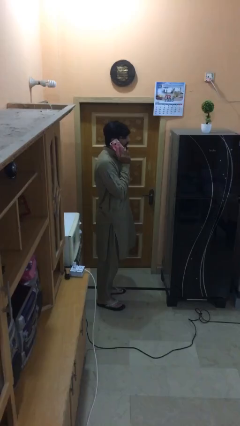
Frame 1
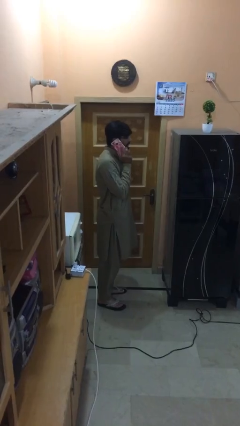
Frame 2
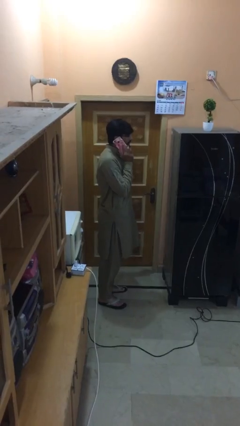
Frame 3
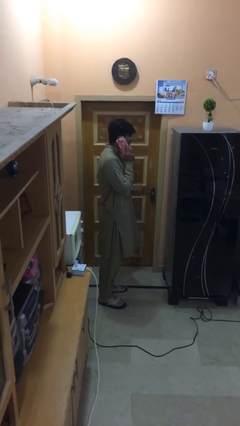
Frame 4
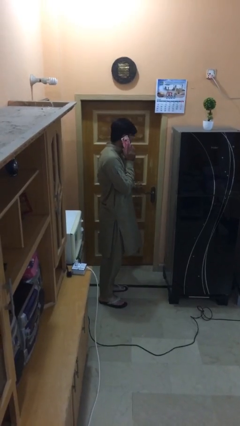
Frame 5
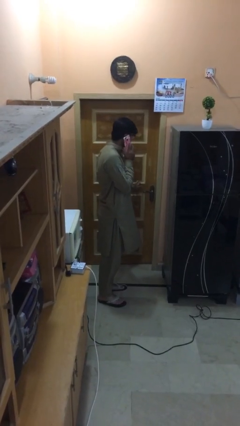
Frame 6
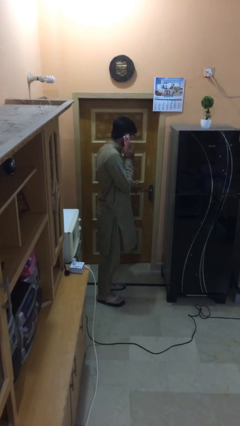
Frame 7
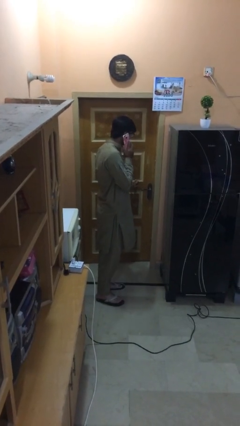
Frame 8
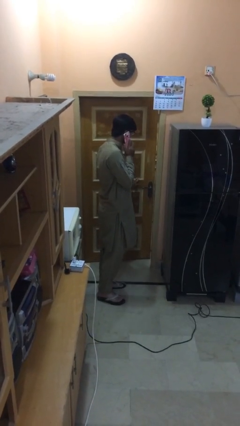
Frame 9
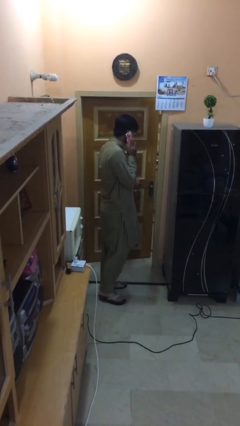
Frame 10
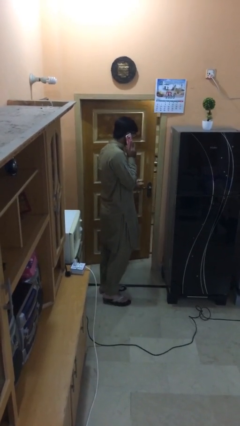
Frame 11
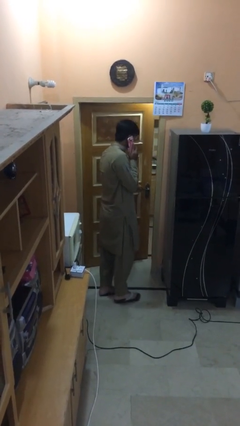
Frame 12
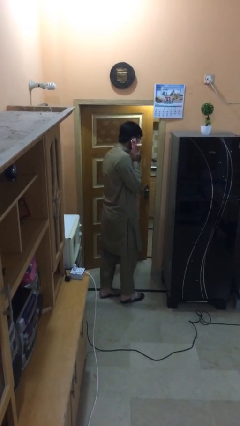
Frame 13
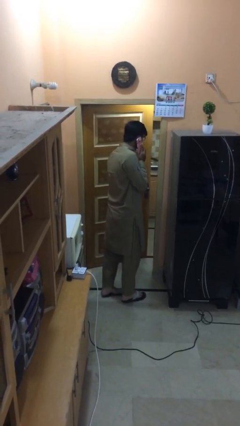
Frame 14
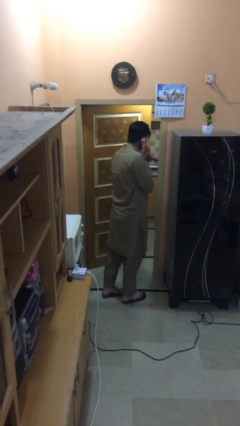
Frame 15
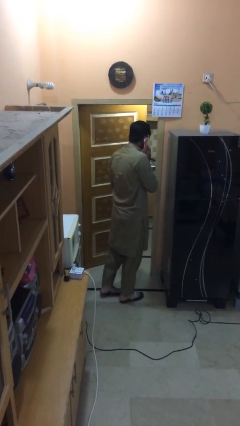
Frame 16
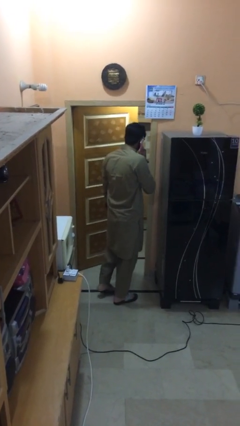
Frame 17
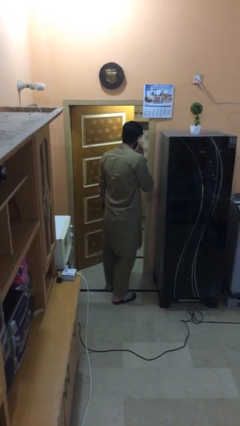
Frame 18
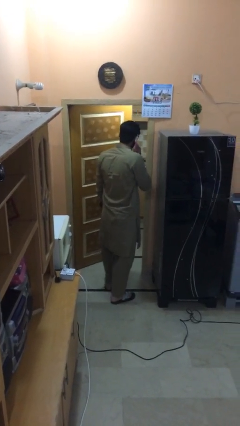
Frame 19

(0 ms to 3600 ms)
person opens facility door

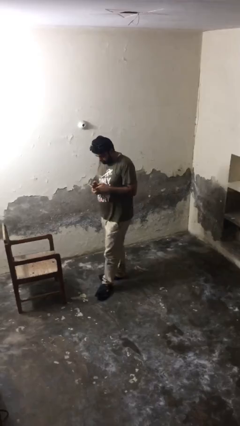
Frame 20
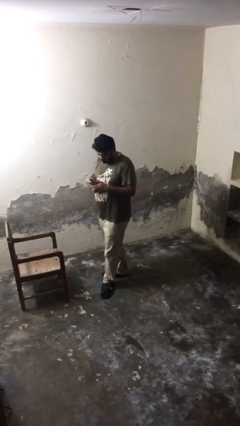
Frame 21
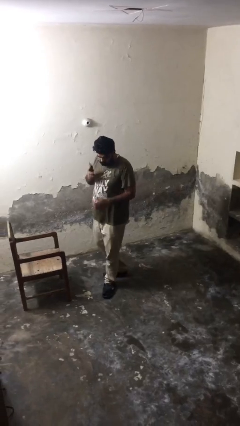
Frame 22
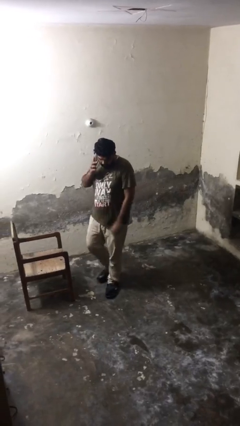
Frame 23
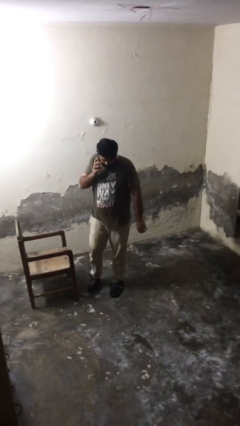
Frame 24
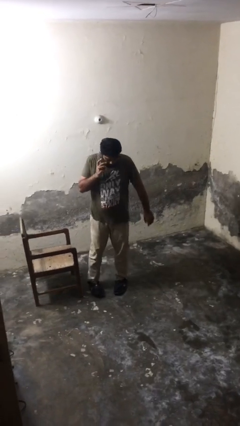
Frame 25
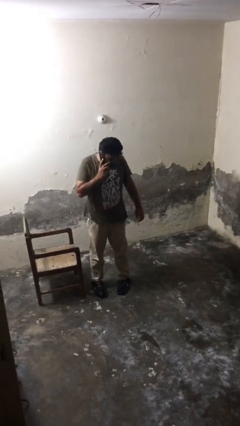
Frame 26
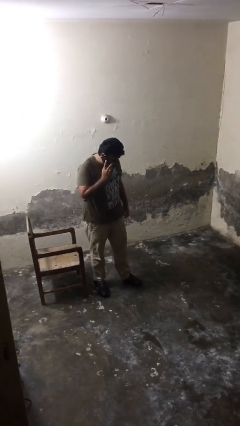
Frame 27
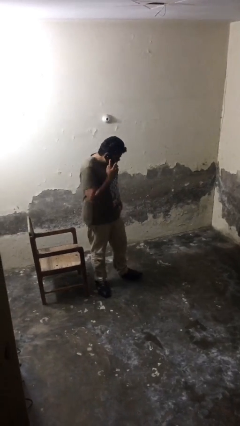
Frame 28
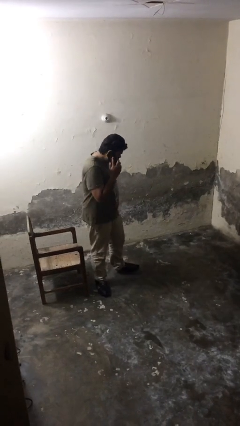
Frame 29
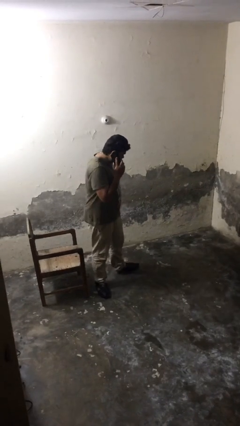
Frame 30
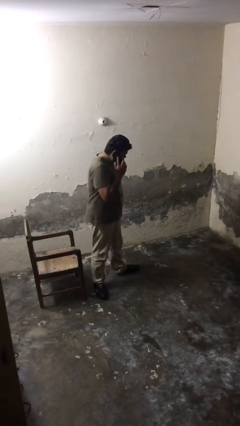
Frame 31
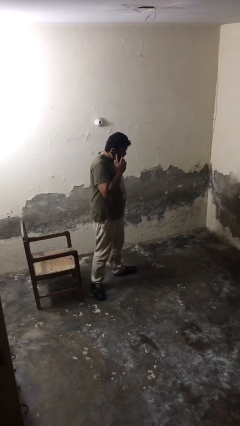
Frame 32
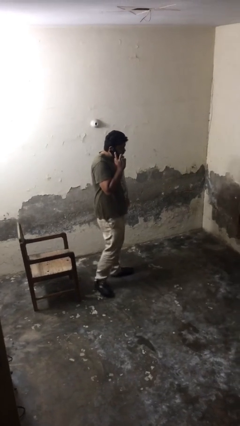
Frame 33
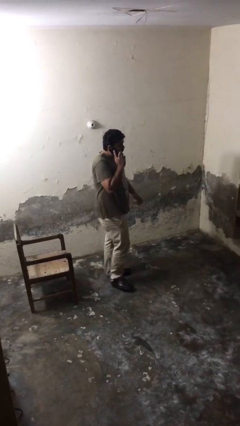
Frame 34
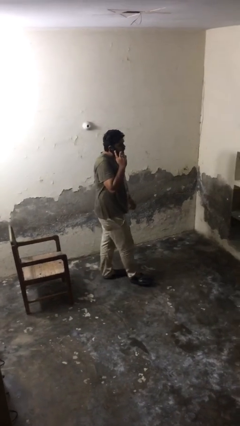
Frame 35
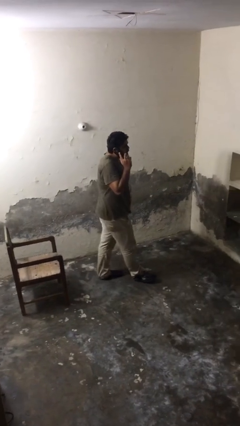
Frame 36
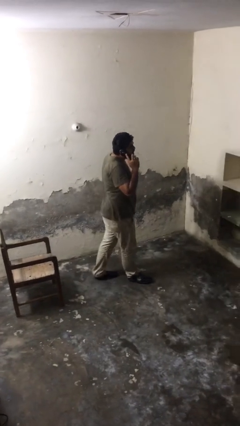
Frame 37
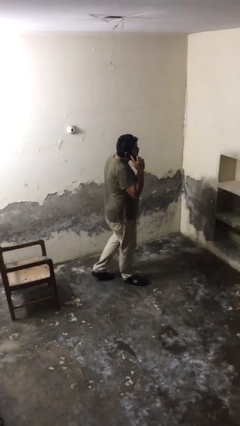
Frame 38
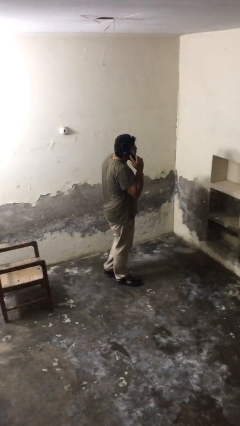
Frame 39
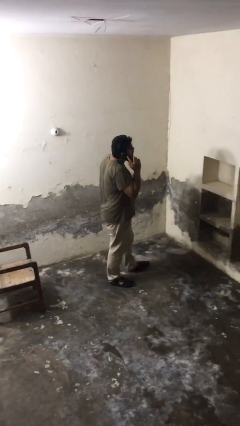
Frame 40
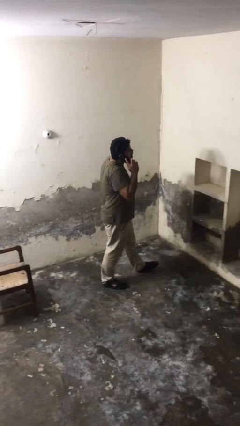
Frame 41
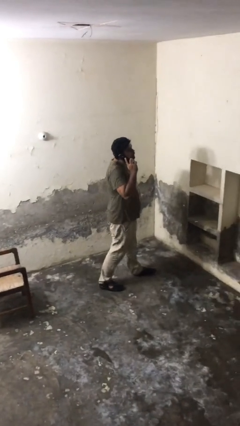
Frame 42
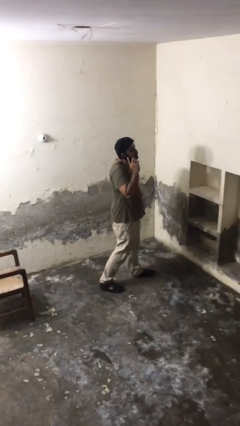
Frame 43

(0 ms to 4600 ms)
person talks on phone

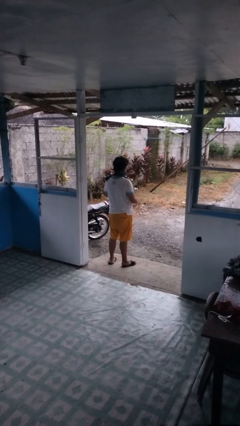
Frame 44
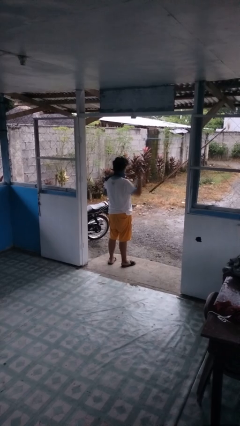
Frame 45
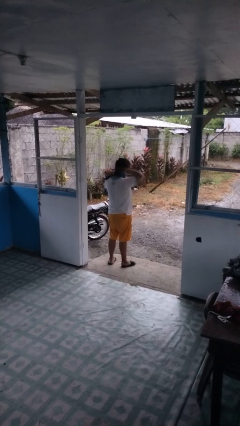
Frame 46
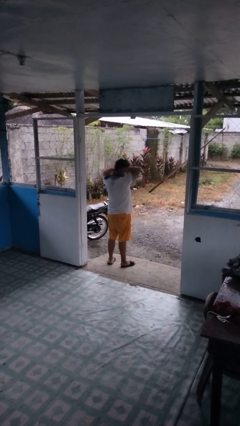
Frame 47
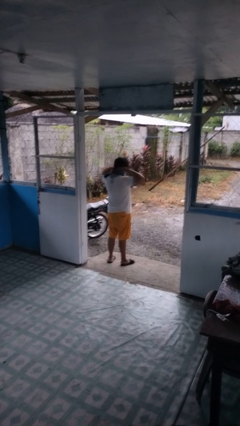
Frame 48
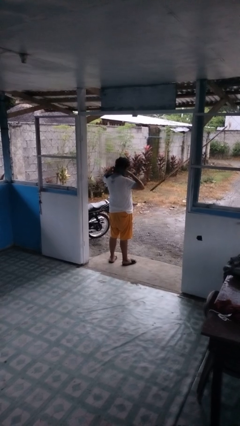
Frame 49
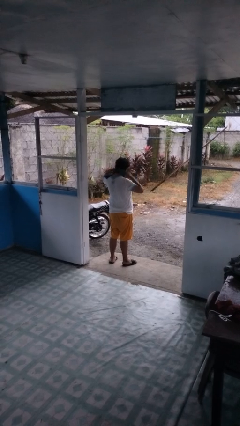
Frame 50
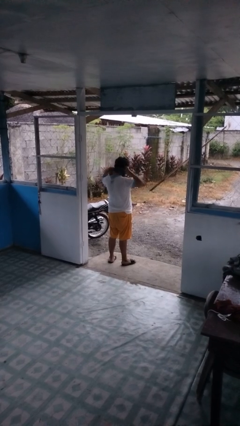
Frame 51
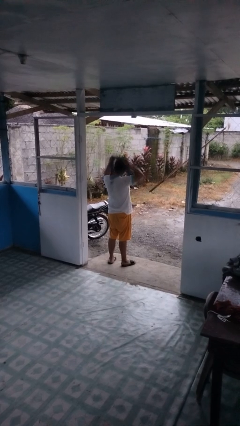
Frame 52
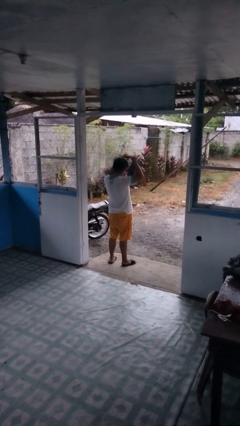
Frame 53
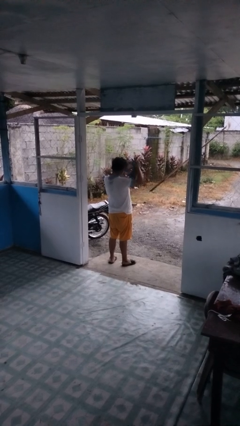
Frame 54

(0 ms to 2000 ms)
person takes off scarf

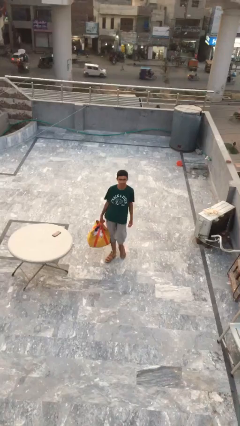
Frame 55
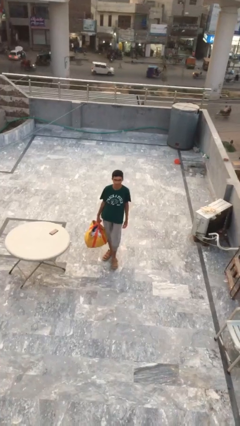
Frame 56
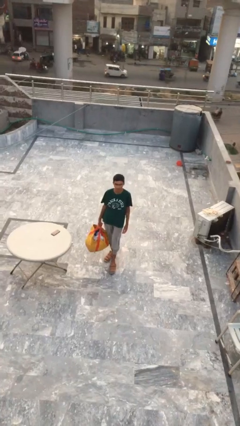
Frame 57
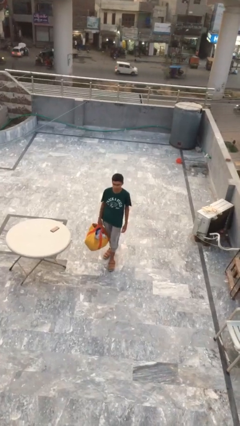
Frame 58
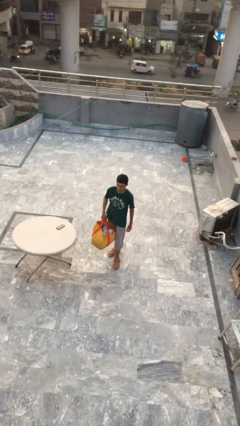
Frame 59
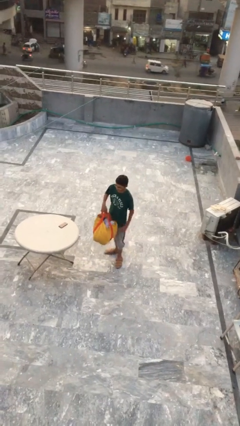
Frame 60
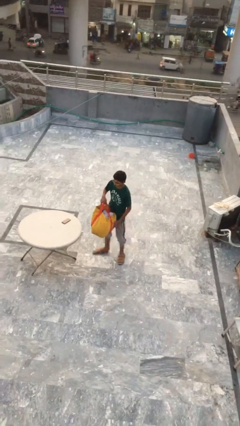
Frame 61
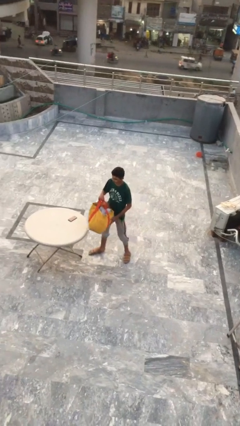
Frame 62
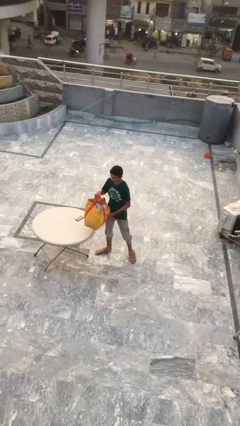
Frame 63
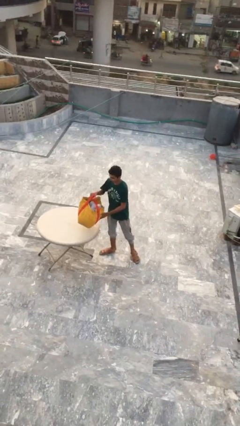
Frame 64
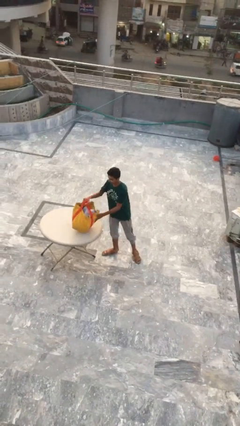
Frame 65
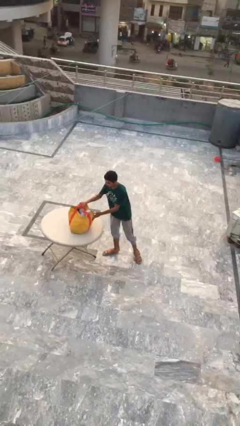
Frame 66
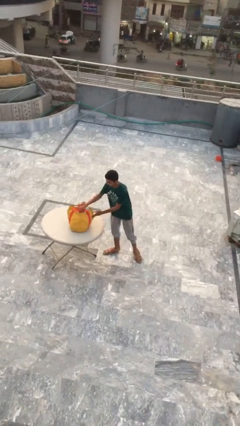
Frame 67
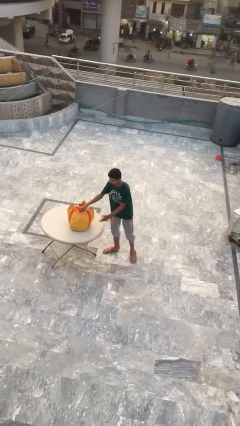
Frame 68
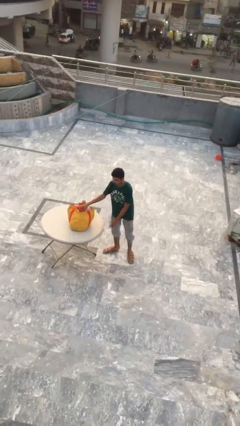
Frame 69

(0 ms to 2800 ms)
person puts down object on table

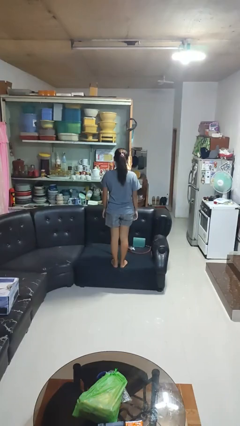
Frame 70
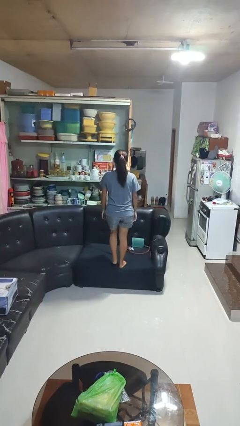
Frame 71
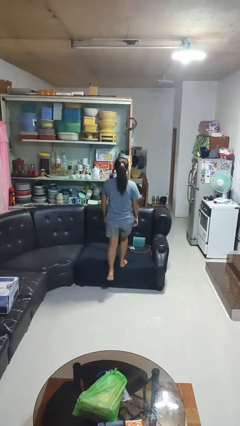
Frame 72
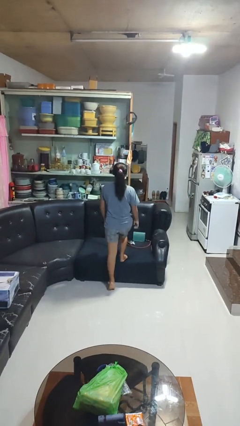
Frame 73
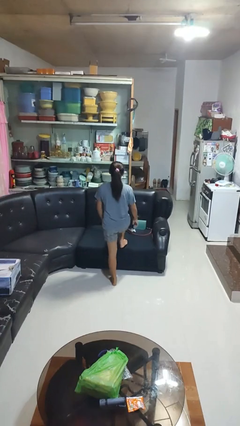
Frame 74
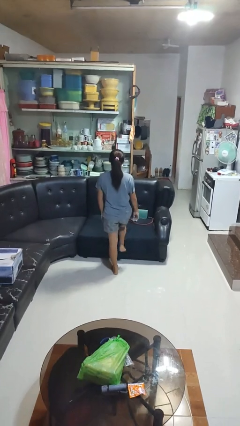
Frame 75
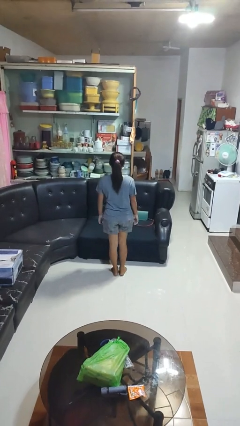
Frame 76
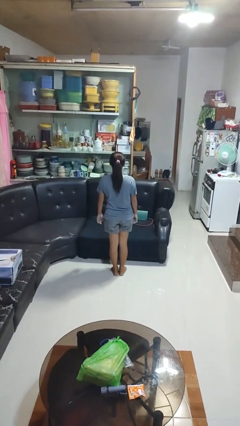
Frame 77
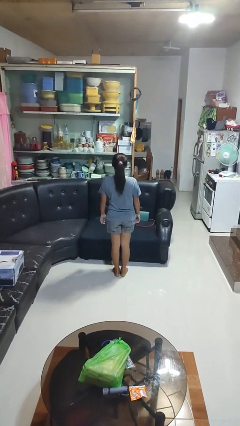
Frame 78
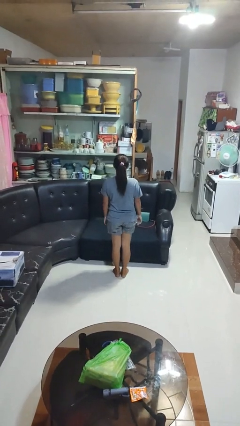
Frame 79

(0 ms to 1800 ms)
person climbs off couch

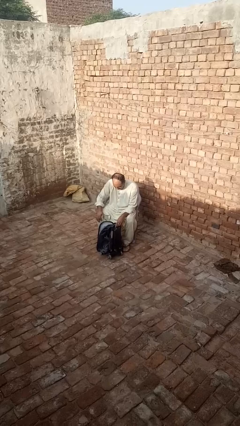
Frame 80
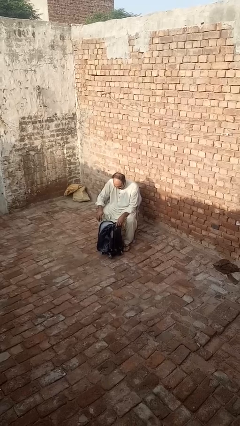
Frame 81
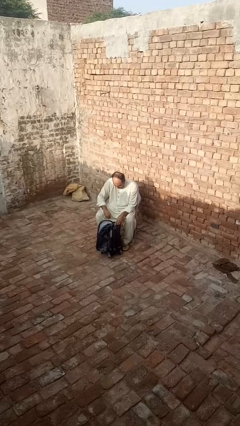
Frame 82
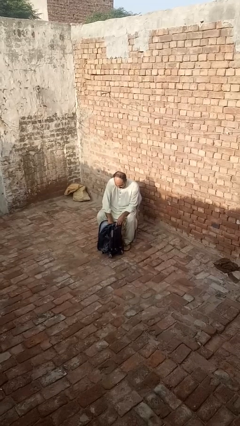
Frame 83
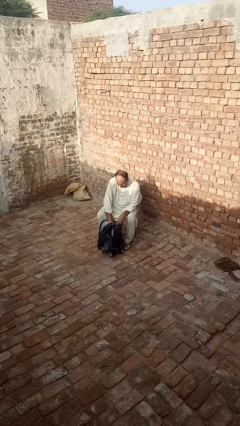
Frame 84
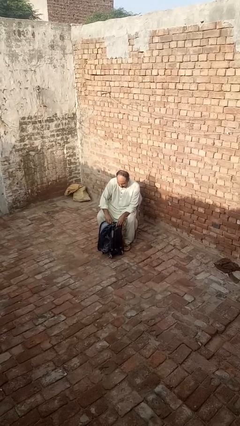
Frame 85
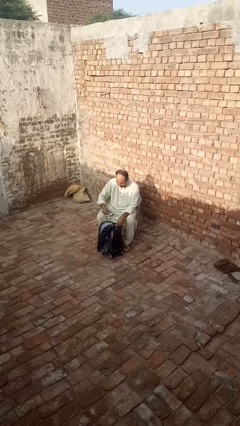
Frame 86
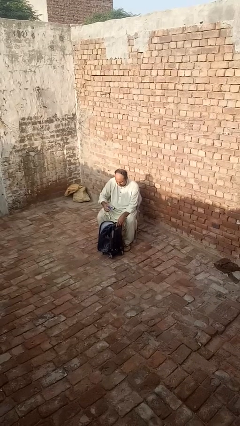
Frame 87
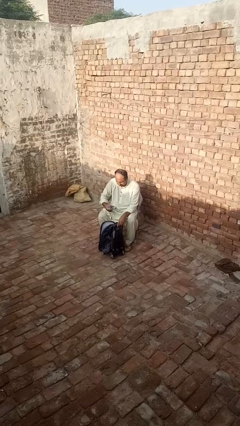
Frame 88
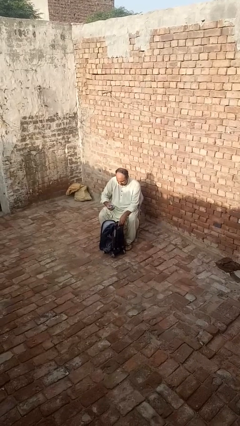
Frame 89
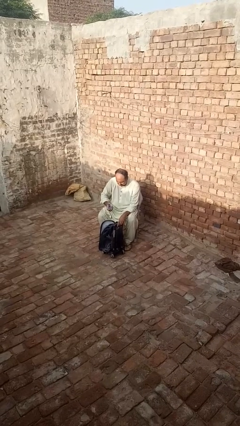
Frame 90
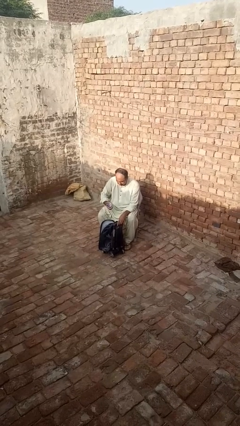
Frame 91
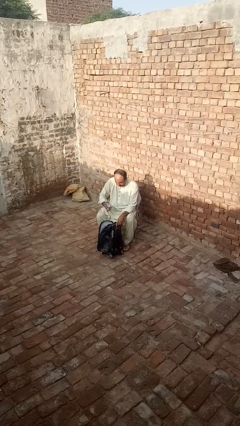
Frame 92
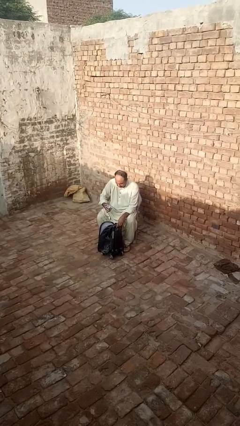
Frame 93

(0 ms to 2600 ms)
person takes object from backpack

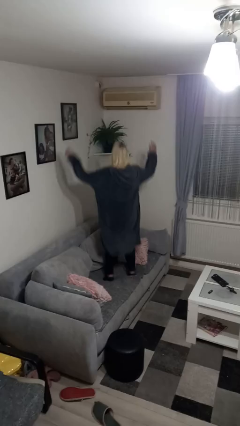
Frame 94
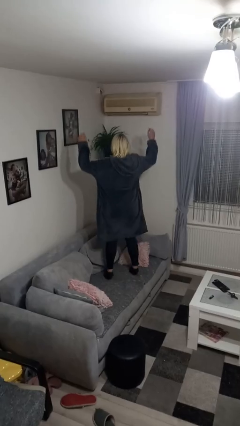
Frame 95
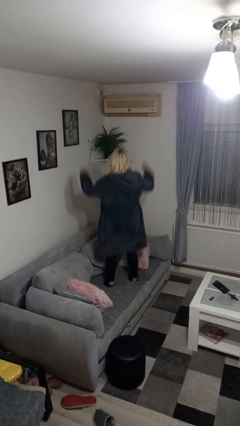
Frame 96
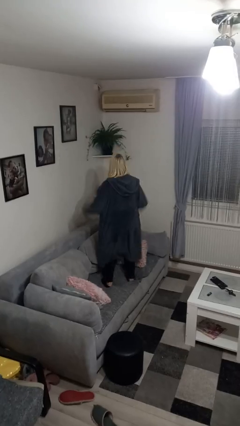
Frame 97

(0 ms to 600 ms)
person jumps on couch
